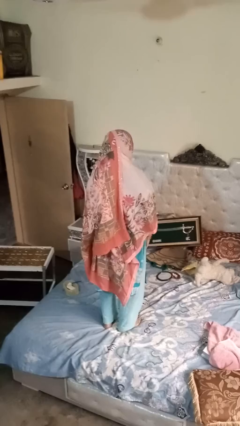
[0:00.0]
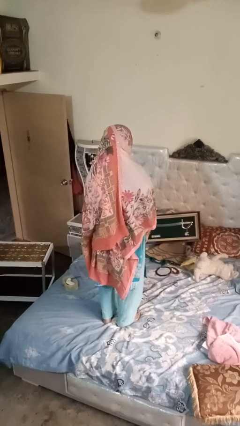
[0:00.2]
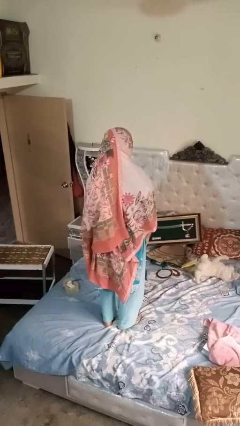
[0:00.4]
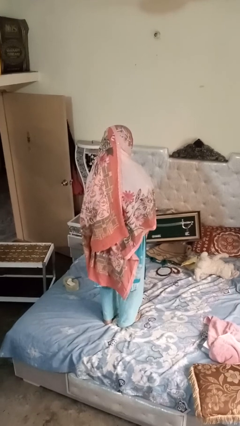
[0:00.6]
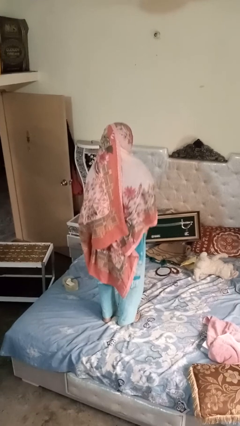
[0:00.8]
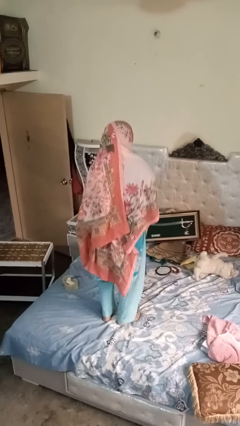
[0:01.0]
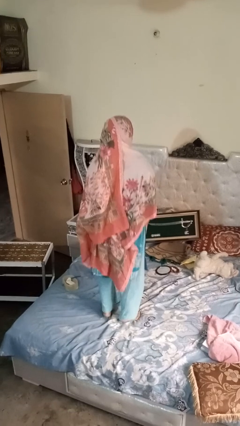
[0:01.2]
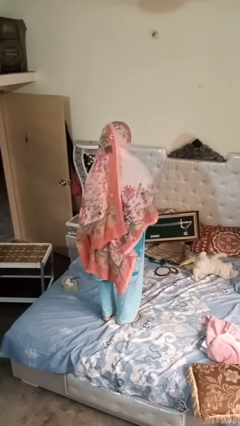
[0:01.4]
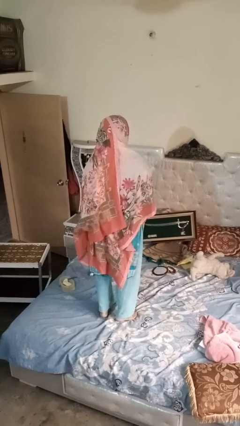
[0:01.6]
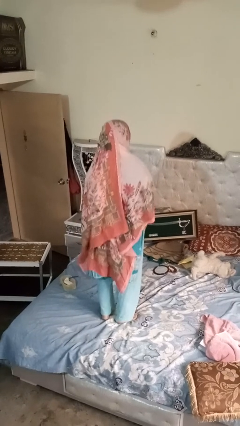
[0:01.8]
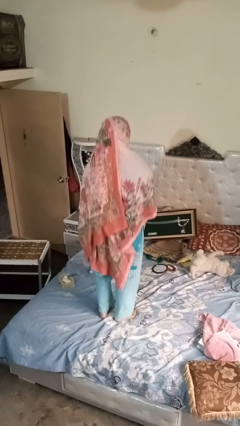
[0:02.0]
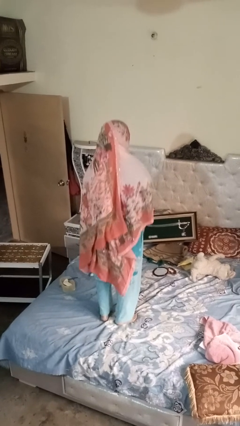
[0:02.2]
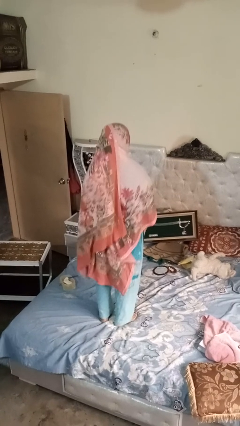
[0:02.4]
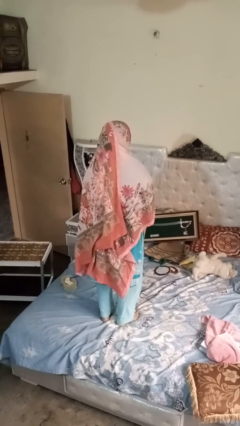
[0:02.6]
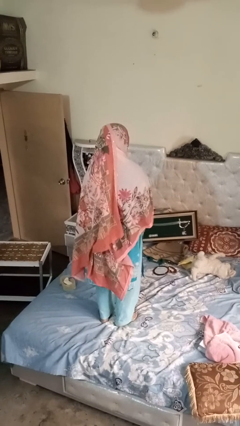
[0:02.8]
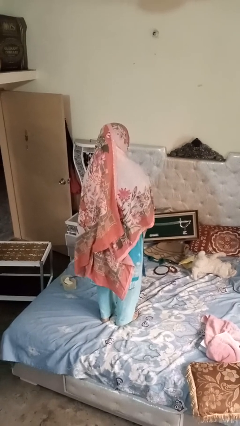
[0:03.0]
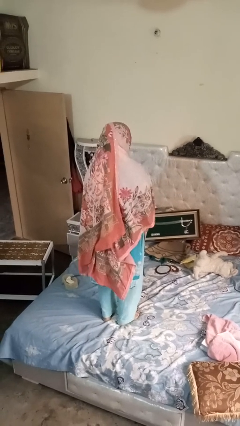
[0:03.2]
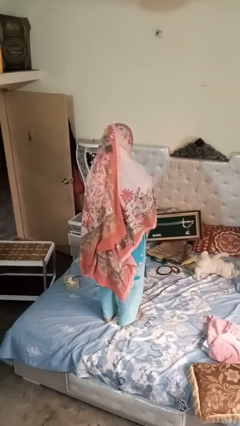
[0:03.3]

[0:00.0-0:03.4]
person jumps on bed

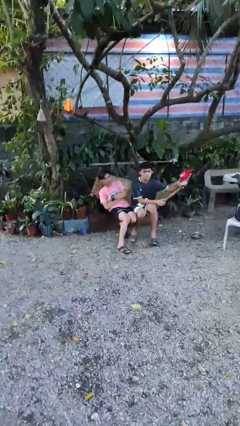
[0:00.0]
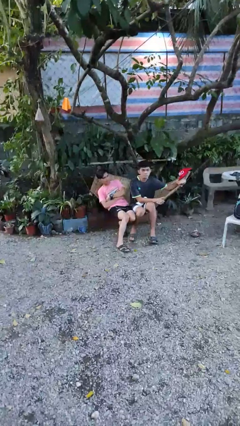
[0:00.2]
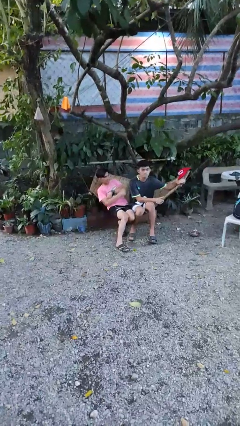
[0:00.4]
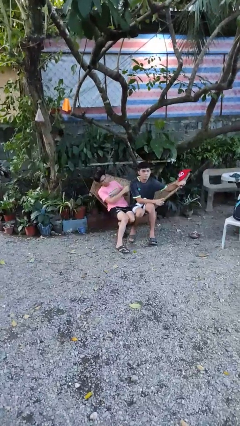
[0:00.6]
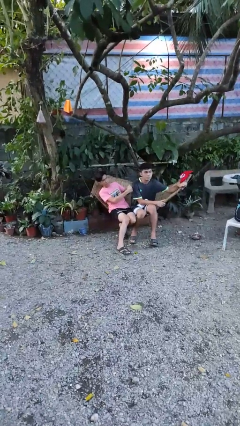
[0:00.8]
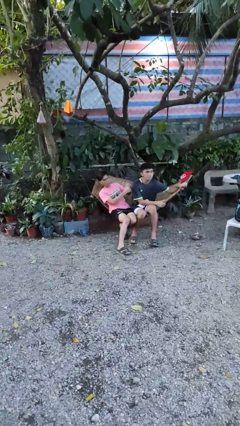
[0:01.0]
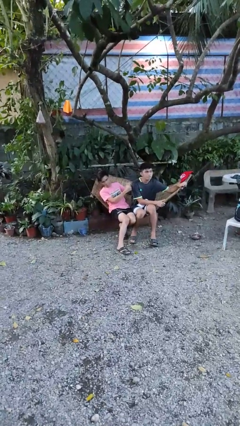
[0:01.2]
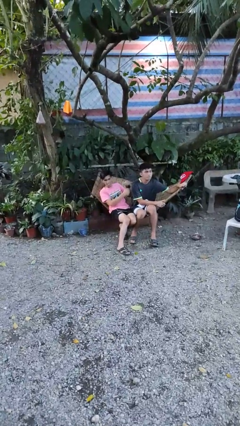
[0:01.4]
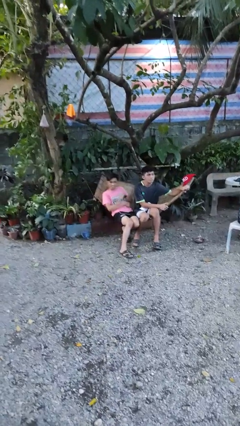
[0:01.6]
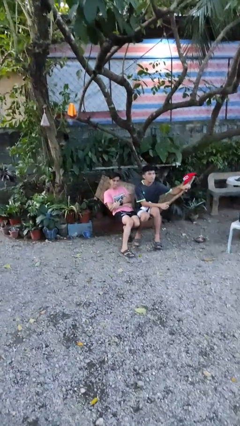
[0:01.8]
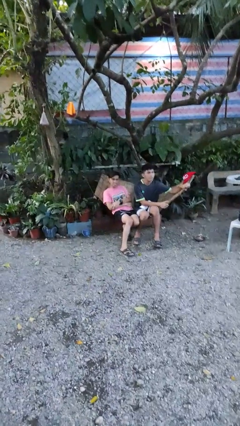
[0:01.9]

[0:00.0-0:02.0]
person pounds shoulders of person

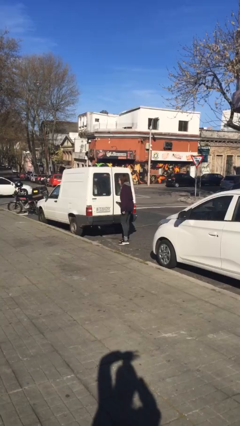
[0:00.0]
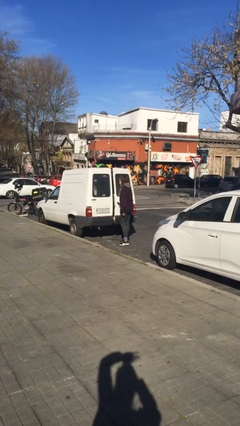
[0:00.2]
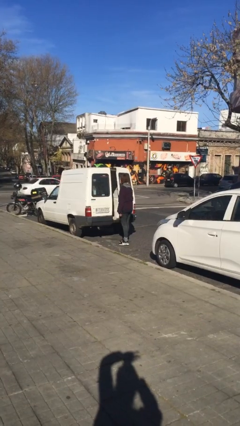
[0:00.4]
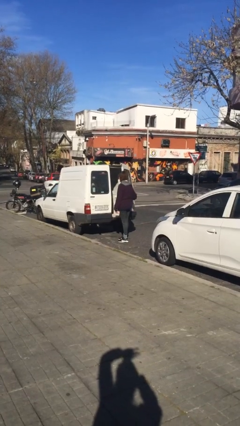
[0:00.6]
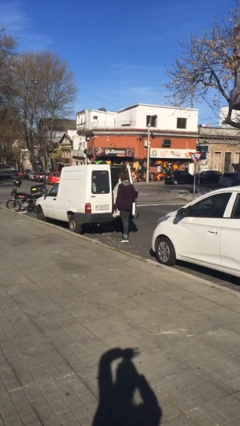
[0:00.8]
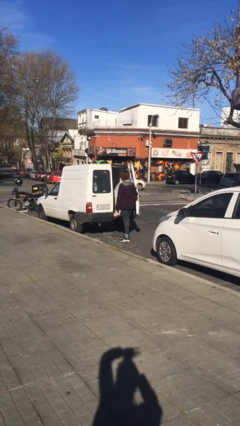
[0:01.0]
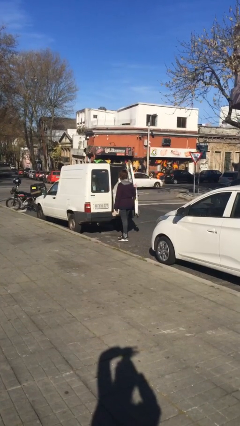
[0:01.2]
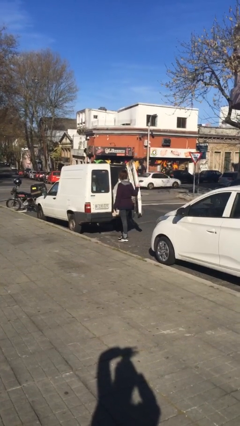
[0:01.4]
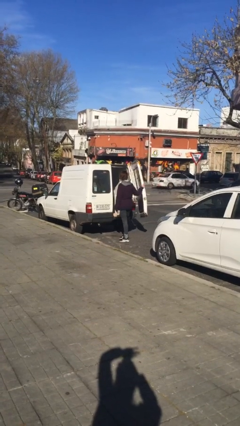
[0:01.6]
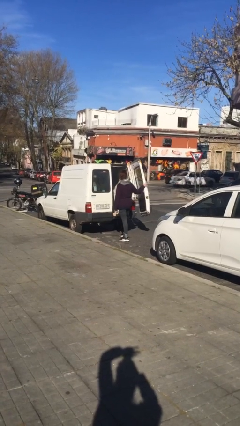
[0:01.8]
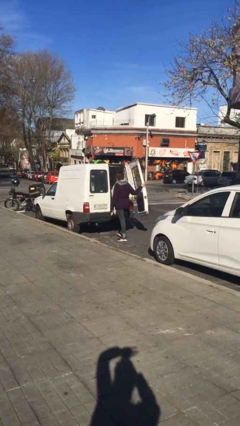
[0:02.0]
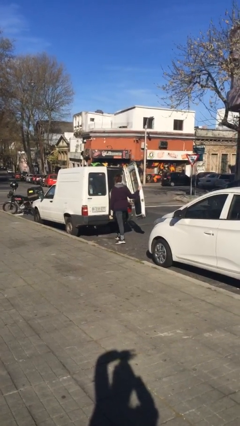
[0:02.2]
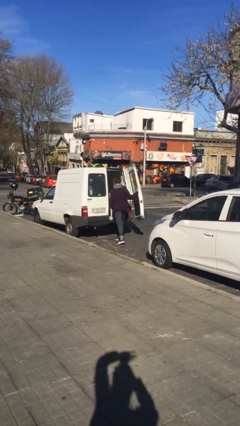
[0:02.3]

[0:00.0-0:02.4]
person opens car door

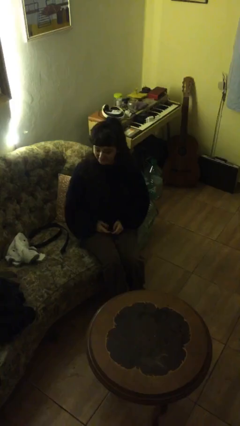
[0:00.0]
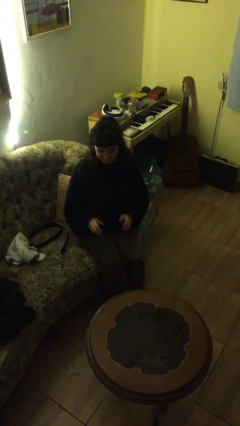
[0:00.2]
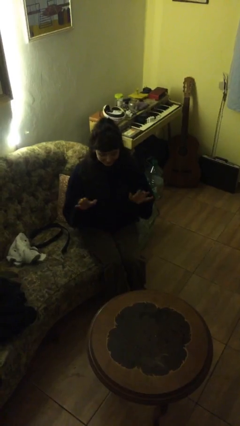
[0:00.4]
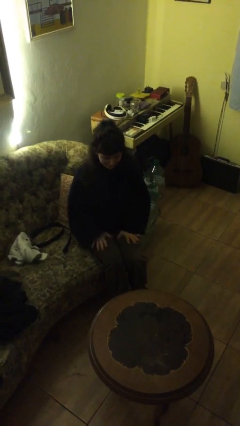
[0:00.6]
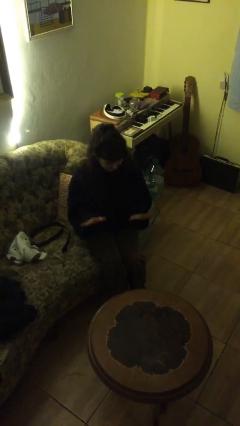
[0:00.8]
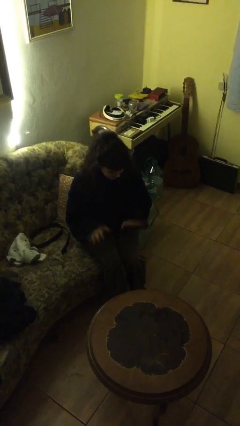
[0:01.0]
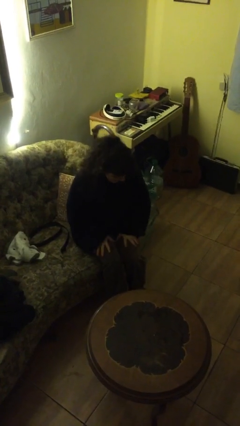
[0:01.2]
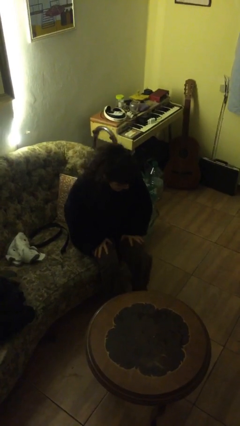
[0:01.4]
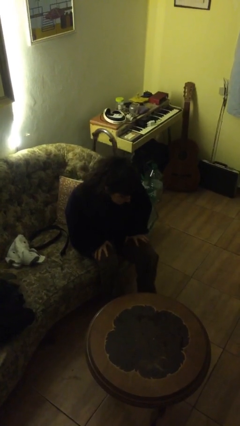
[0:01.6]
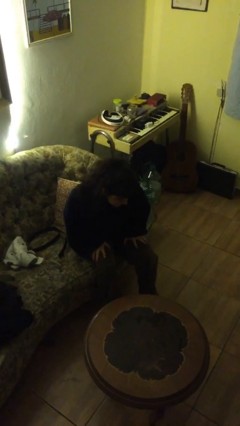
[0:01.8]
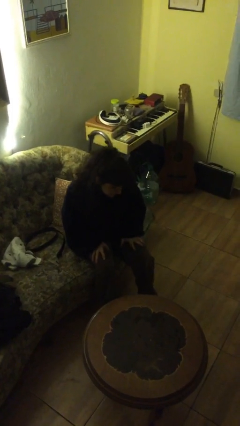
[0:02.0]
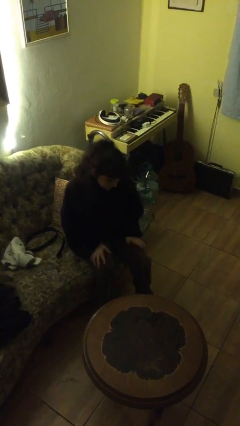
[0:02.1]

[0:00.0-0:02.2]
person slaps hands on thighs

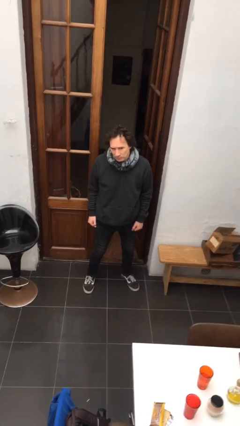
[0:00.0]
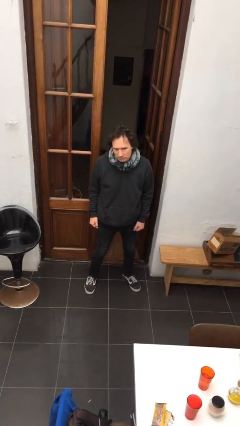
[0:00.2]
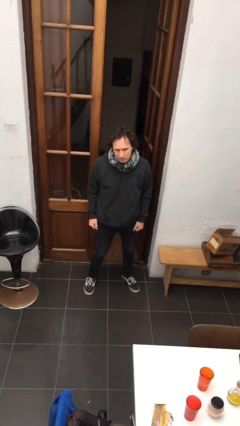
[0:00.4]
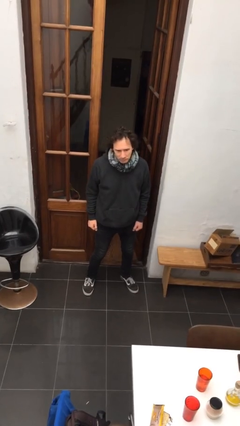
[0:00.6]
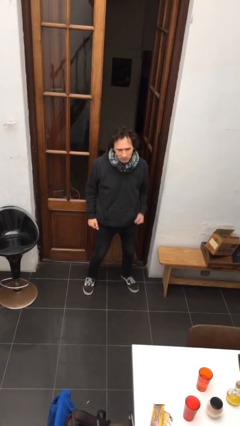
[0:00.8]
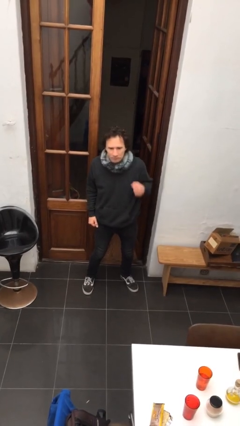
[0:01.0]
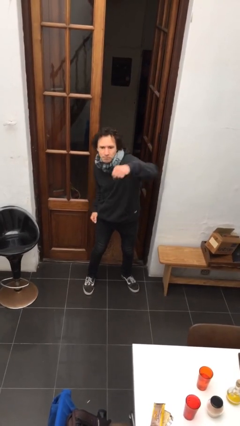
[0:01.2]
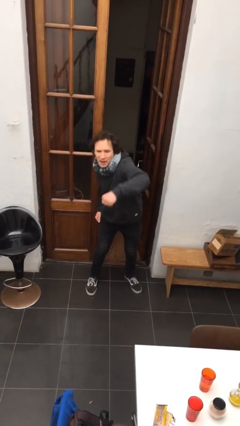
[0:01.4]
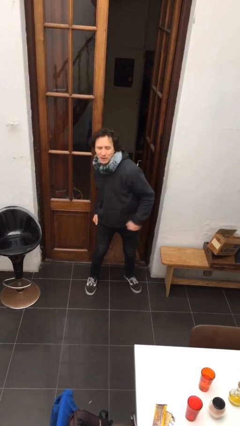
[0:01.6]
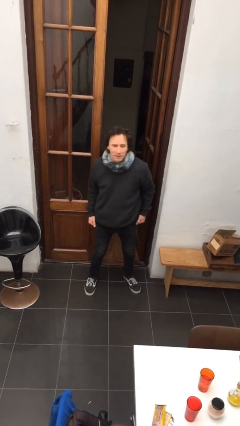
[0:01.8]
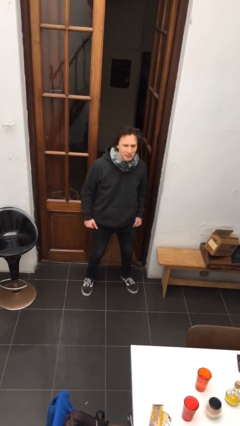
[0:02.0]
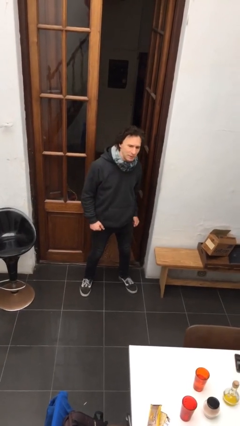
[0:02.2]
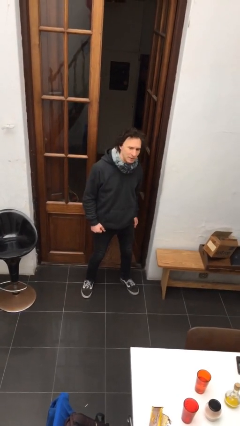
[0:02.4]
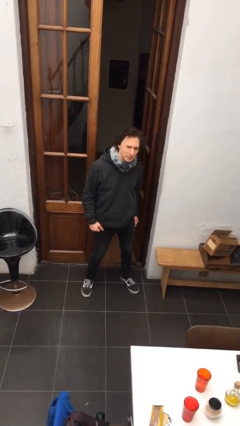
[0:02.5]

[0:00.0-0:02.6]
person punches

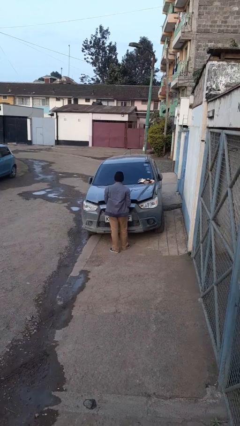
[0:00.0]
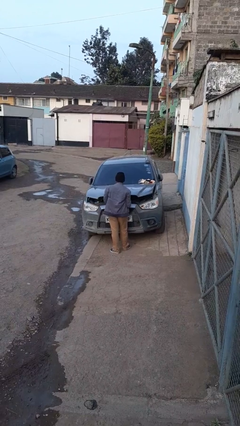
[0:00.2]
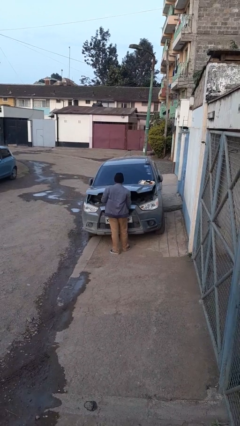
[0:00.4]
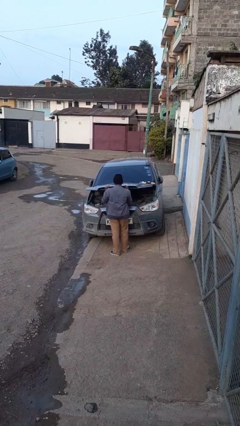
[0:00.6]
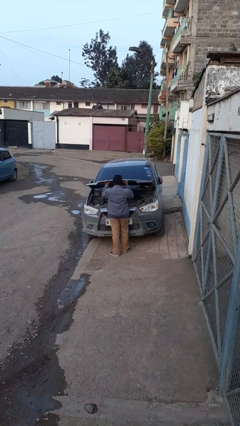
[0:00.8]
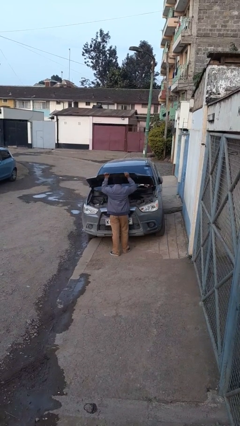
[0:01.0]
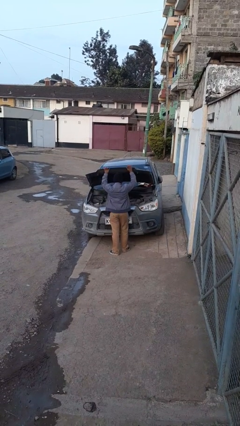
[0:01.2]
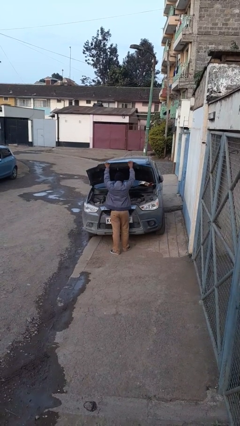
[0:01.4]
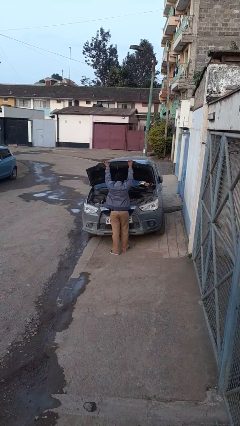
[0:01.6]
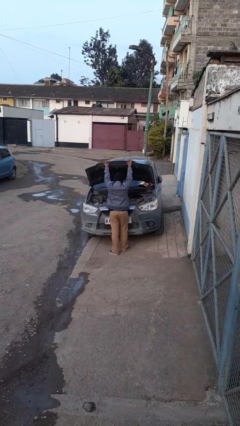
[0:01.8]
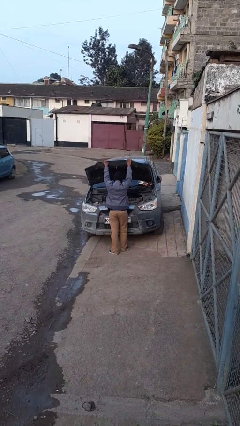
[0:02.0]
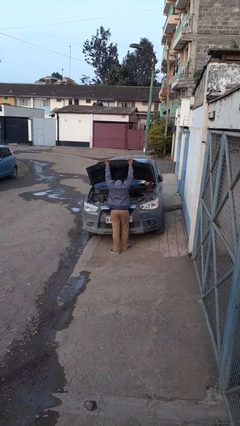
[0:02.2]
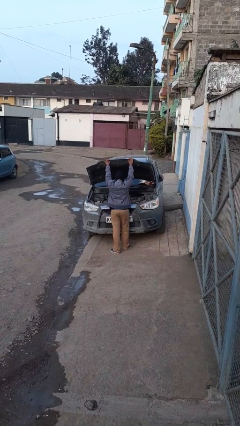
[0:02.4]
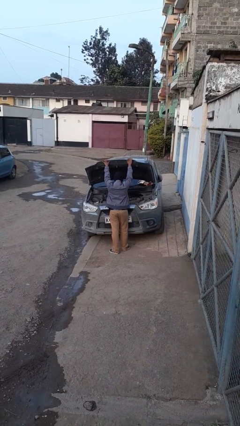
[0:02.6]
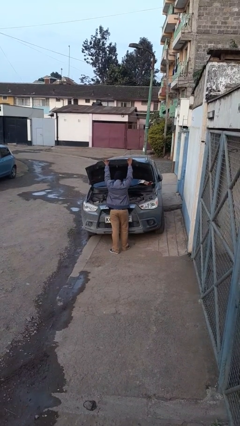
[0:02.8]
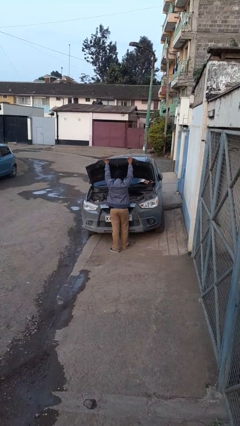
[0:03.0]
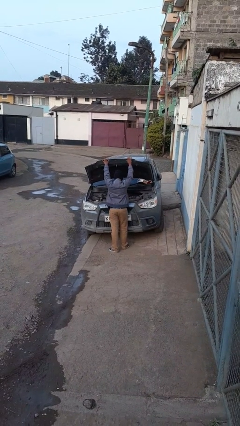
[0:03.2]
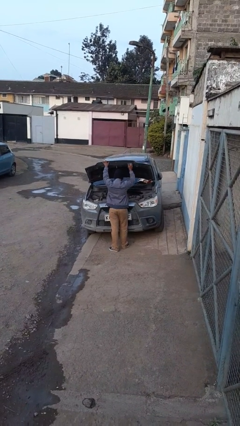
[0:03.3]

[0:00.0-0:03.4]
person opens car hood

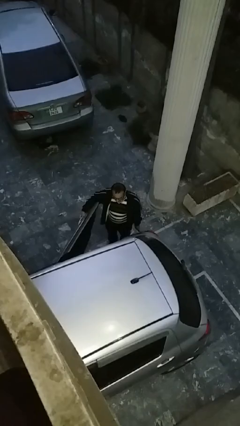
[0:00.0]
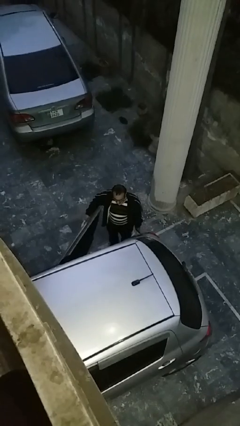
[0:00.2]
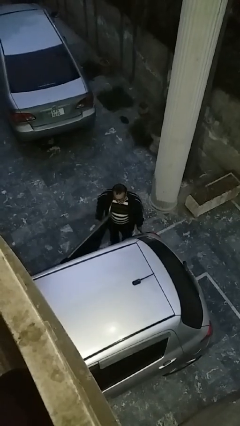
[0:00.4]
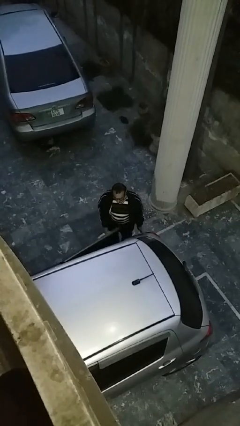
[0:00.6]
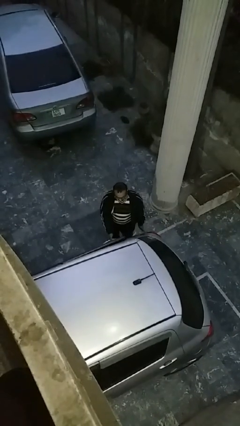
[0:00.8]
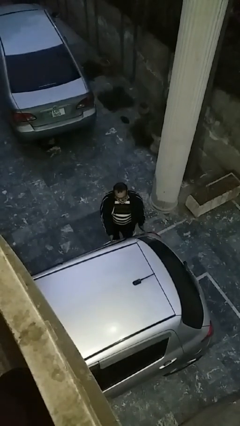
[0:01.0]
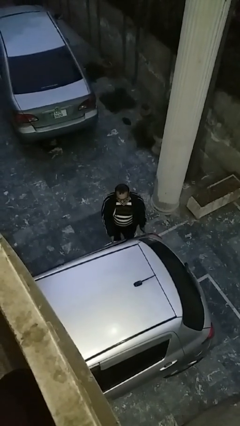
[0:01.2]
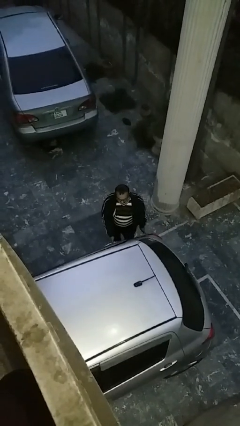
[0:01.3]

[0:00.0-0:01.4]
person closes car door
